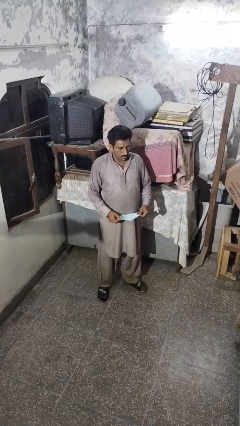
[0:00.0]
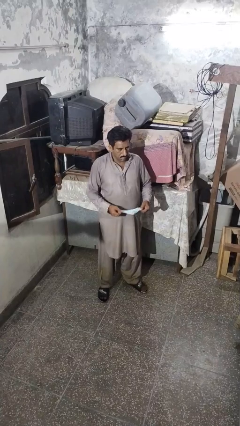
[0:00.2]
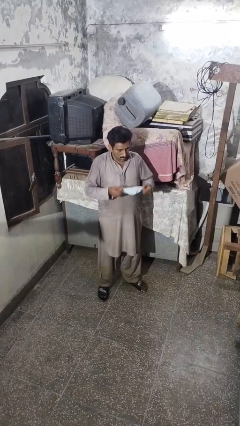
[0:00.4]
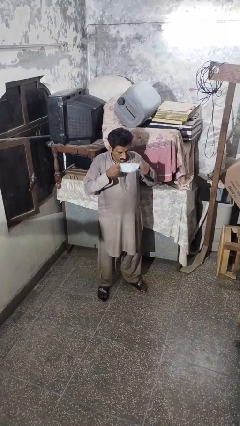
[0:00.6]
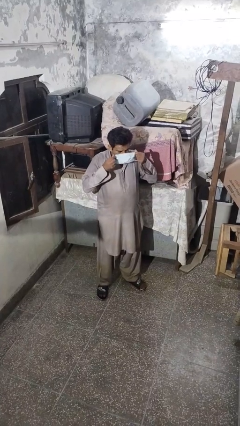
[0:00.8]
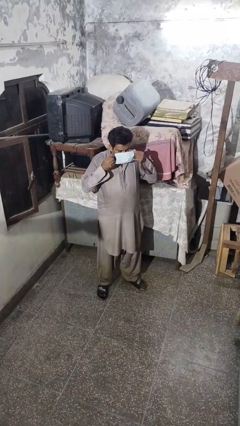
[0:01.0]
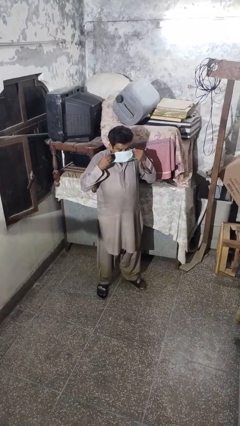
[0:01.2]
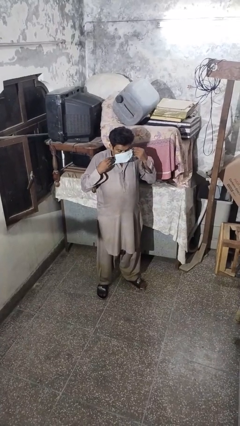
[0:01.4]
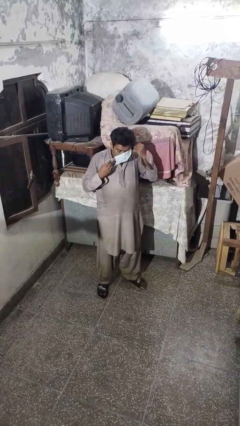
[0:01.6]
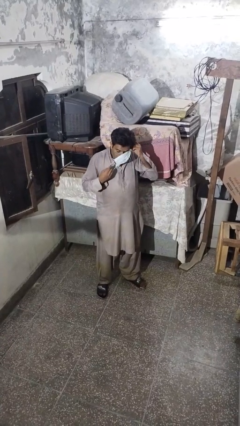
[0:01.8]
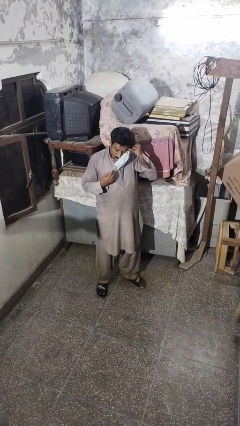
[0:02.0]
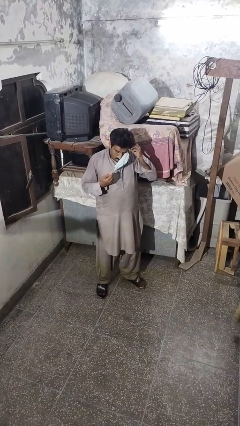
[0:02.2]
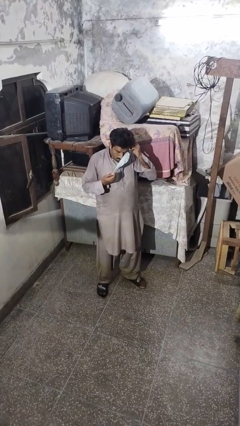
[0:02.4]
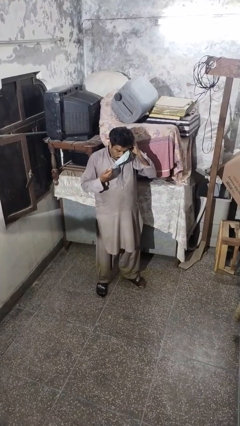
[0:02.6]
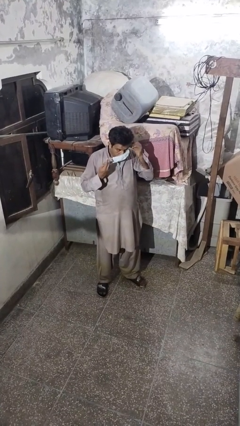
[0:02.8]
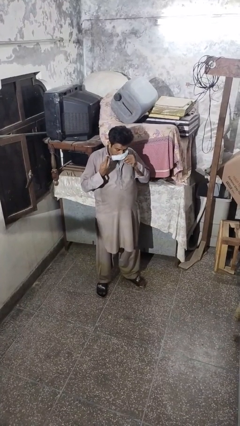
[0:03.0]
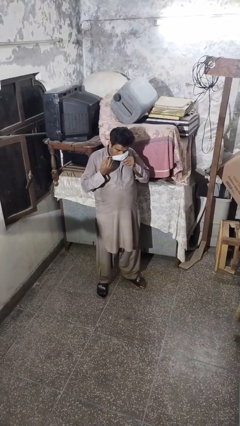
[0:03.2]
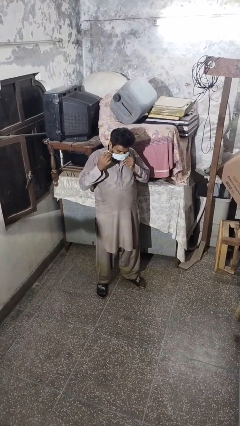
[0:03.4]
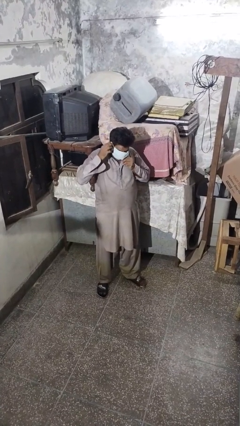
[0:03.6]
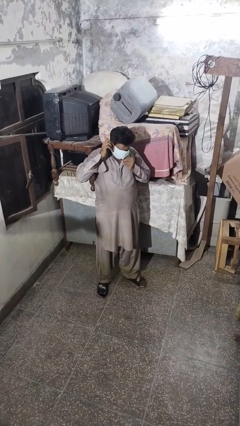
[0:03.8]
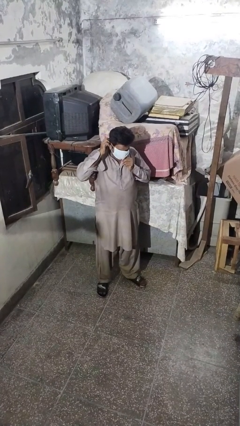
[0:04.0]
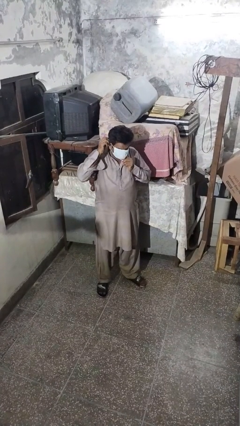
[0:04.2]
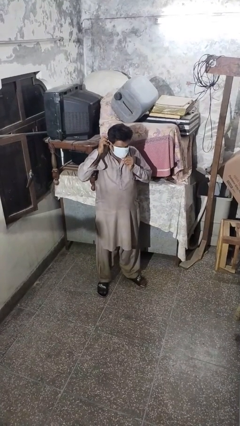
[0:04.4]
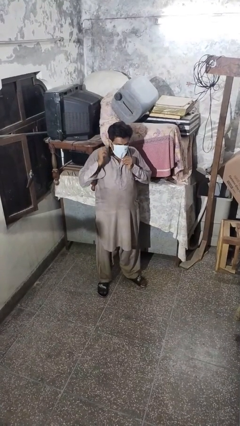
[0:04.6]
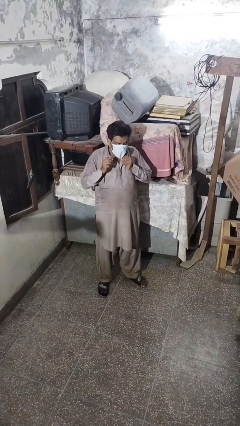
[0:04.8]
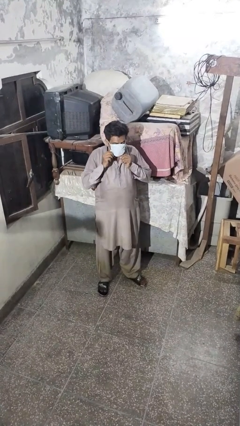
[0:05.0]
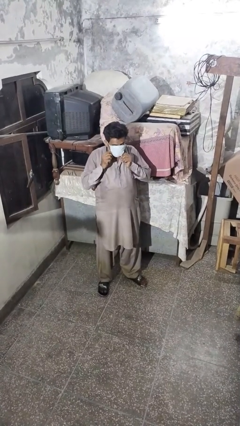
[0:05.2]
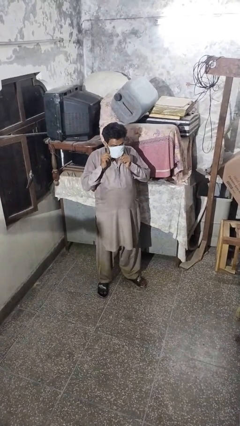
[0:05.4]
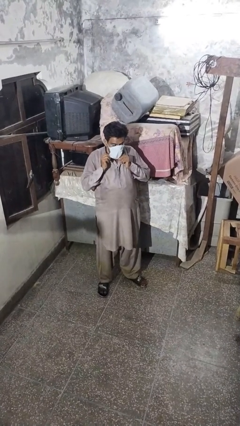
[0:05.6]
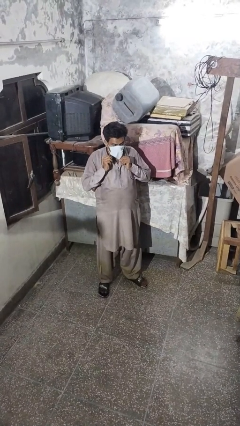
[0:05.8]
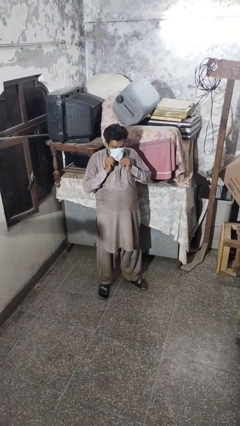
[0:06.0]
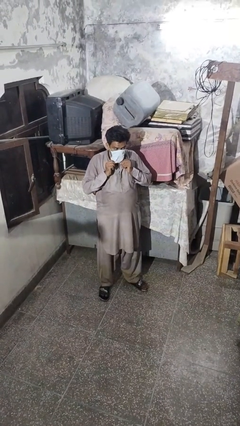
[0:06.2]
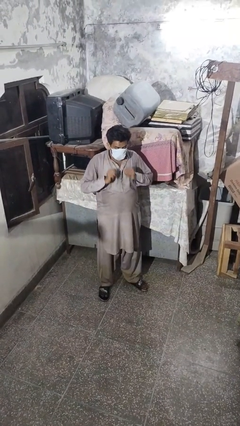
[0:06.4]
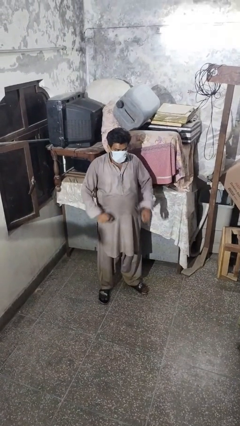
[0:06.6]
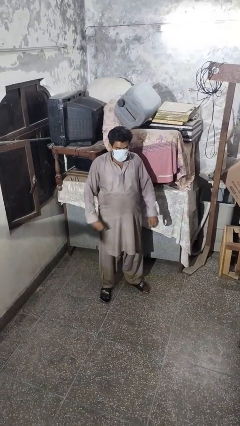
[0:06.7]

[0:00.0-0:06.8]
person puts on facemask

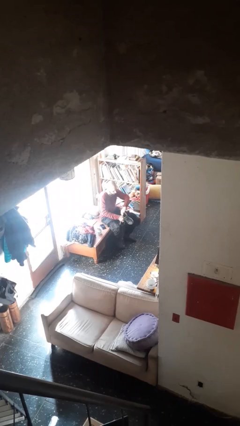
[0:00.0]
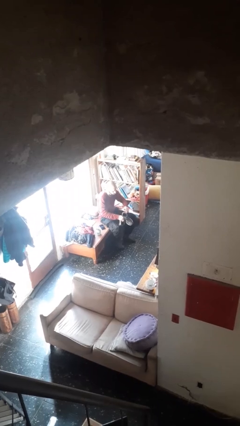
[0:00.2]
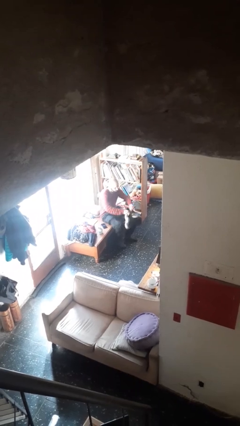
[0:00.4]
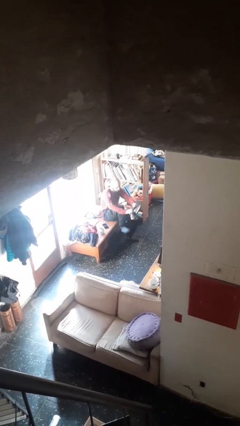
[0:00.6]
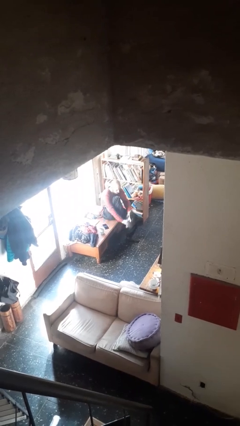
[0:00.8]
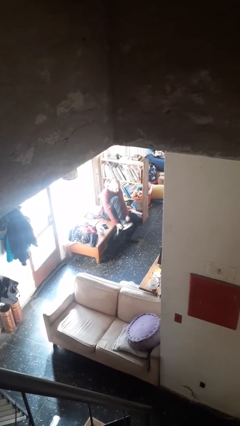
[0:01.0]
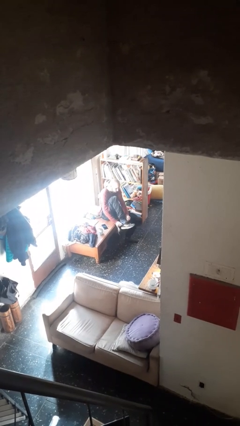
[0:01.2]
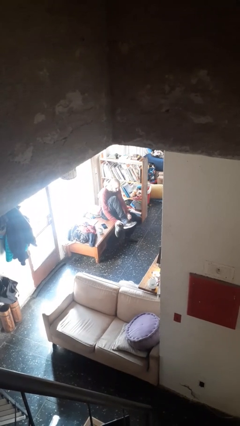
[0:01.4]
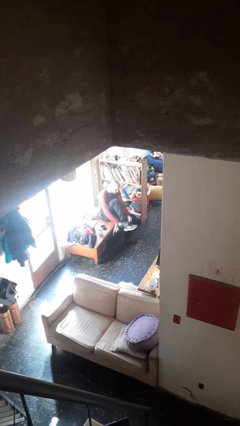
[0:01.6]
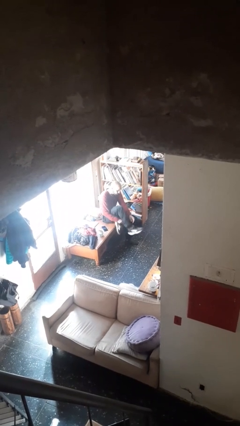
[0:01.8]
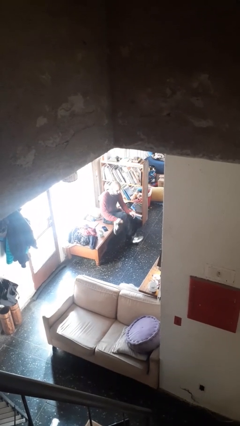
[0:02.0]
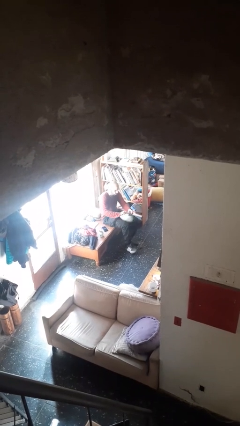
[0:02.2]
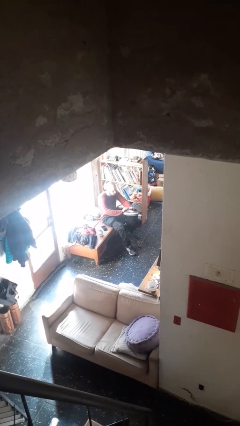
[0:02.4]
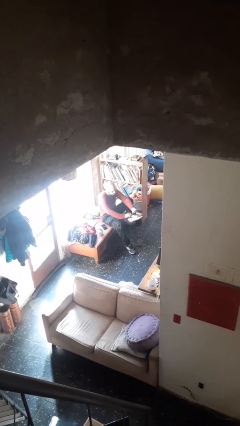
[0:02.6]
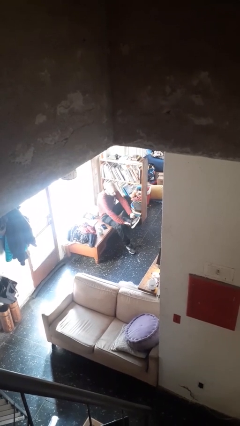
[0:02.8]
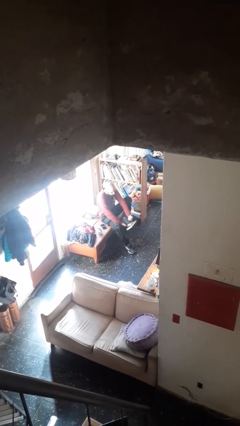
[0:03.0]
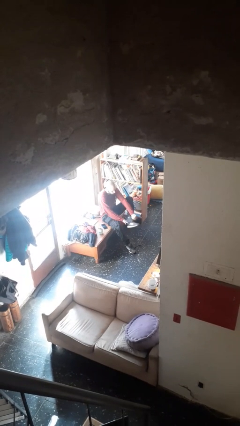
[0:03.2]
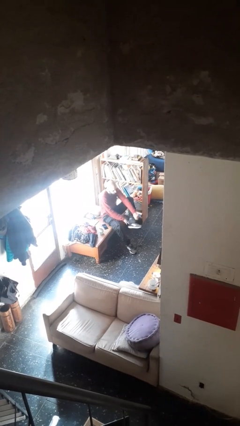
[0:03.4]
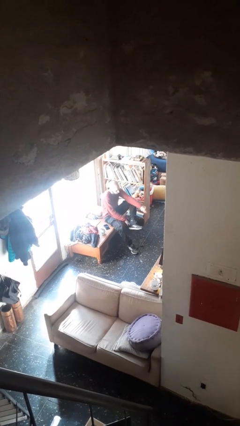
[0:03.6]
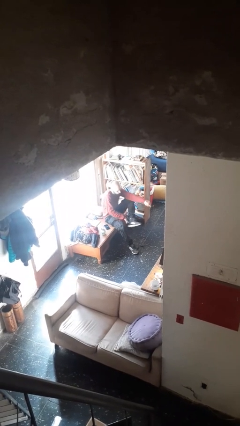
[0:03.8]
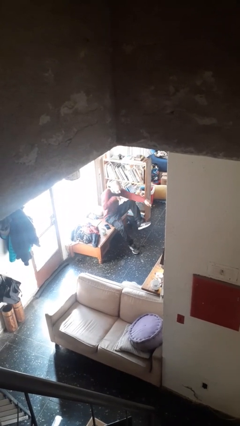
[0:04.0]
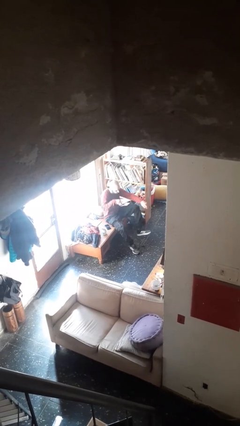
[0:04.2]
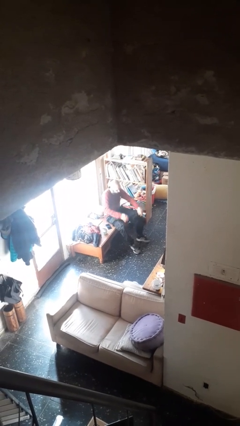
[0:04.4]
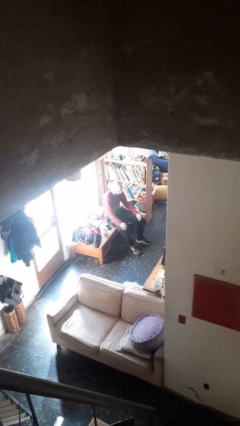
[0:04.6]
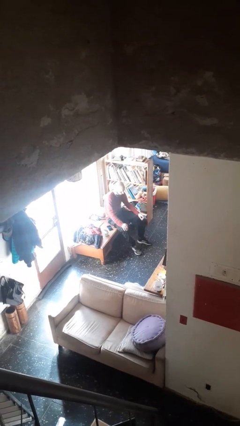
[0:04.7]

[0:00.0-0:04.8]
person puts on shoes

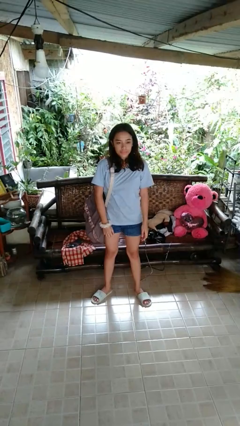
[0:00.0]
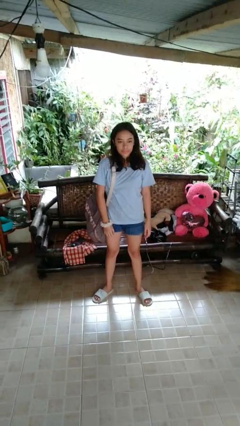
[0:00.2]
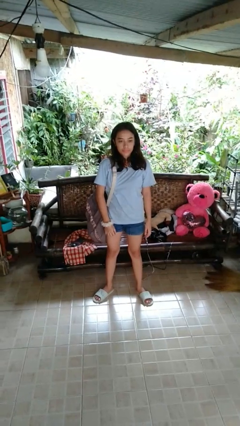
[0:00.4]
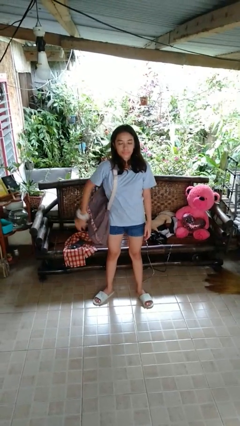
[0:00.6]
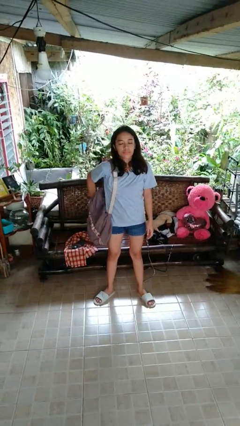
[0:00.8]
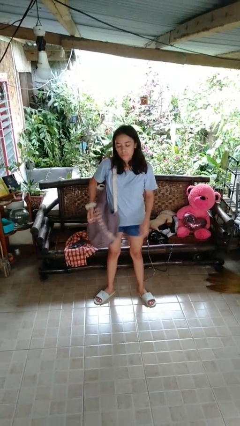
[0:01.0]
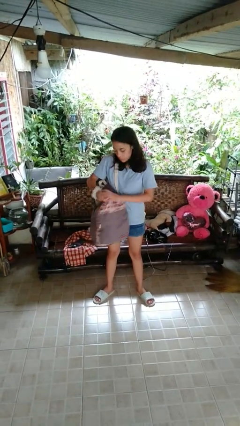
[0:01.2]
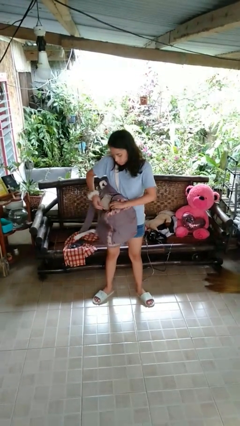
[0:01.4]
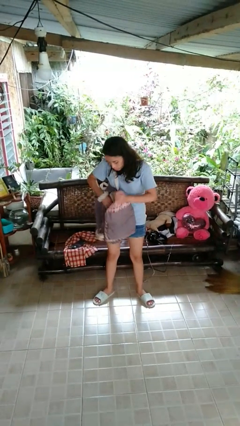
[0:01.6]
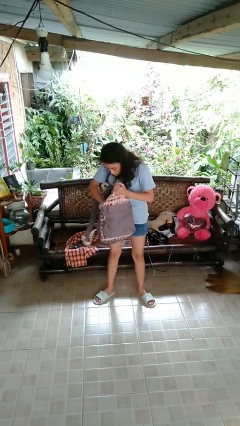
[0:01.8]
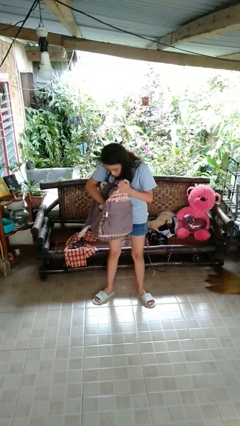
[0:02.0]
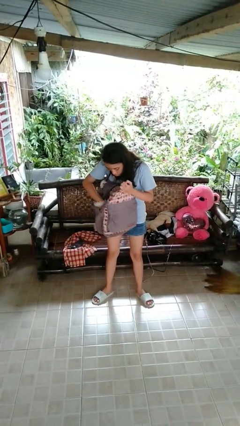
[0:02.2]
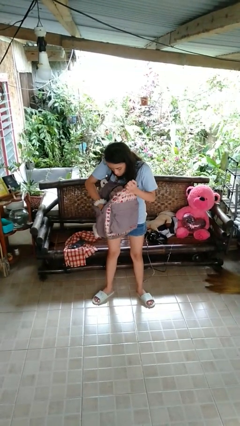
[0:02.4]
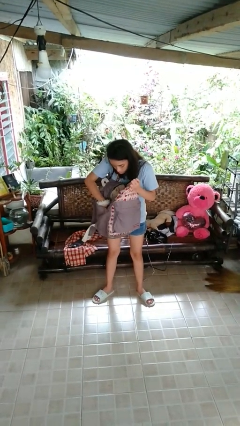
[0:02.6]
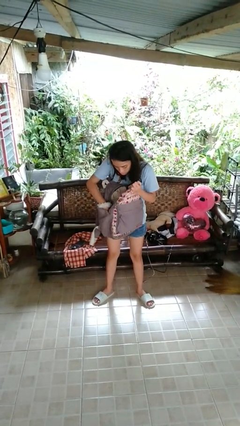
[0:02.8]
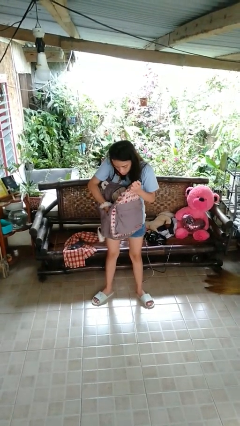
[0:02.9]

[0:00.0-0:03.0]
person searches in backpack

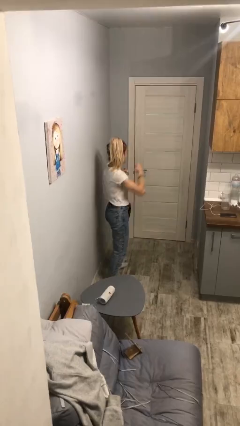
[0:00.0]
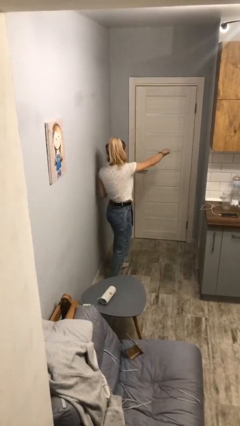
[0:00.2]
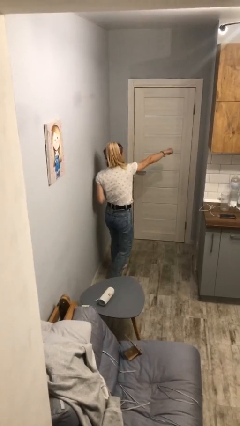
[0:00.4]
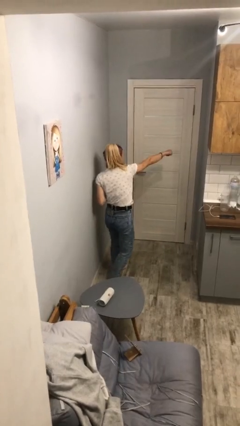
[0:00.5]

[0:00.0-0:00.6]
person karate chop

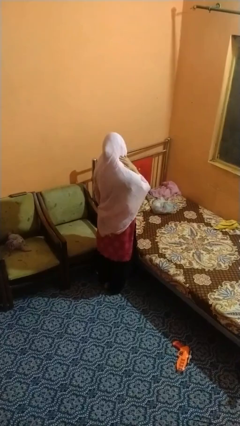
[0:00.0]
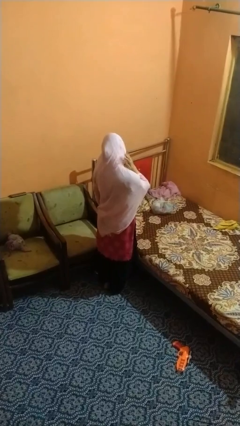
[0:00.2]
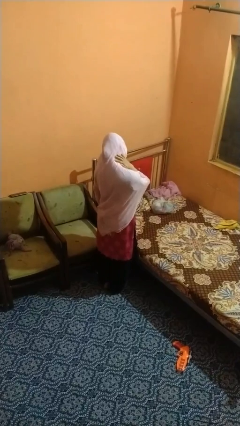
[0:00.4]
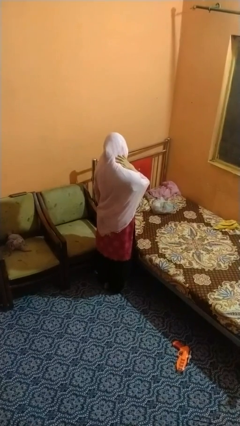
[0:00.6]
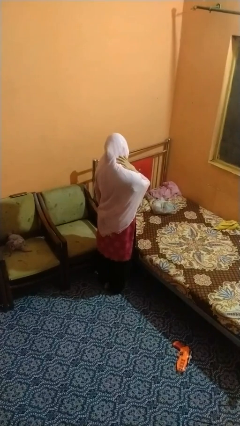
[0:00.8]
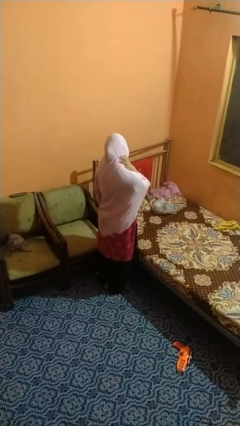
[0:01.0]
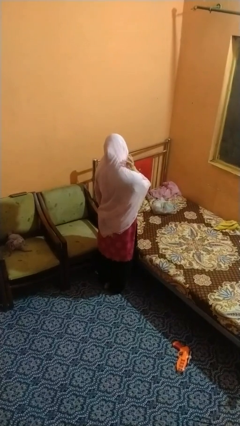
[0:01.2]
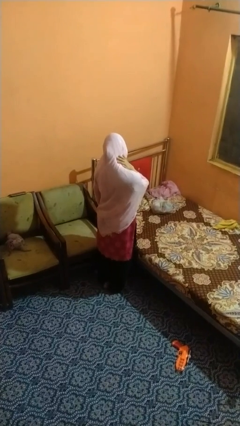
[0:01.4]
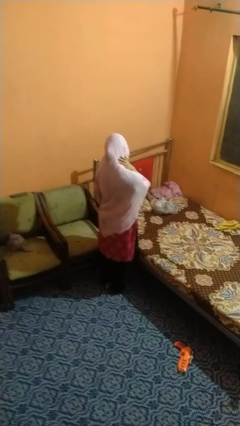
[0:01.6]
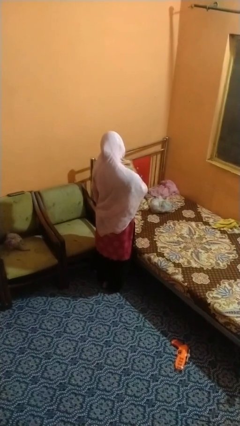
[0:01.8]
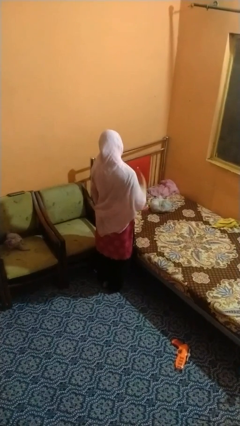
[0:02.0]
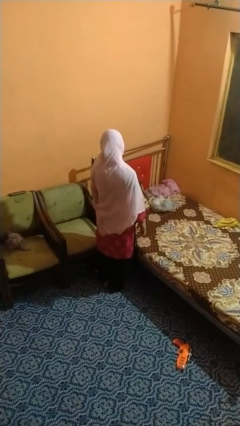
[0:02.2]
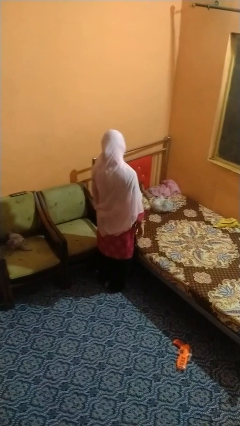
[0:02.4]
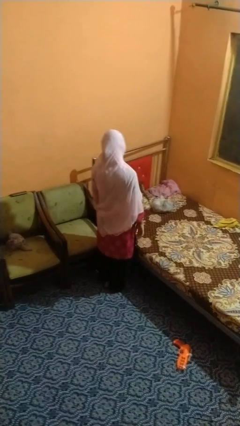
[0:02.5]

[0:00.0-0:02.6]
person swats bug

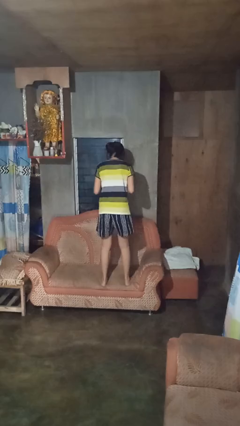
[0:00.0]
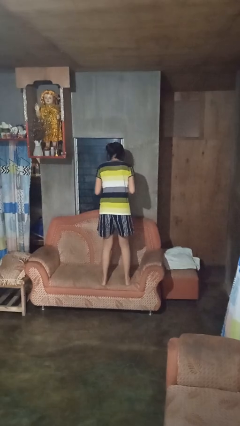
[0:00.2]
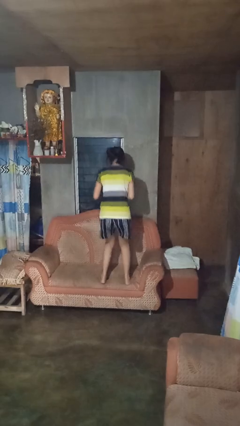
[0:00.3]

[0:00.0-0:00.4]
person jumps on couch
